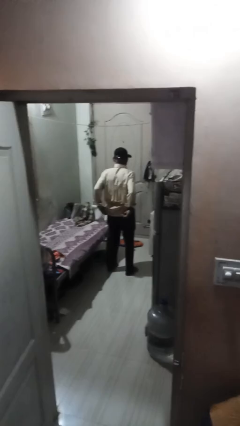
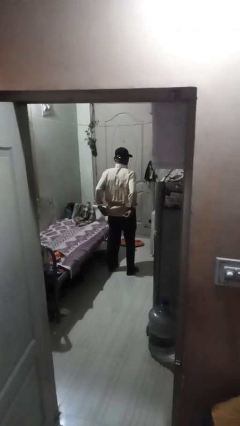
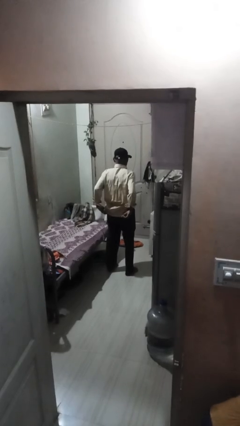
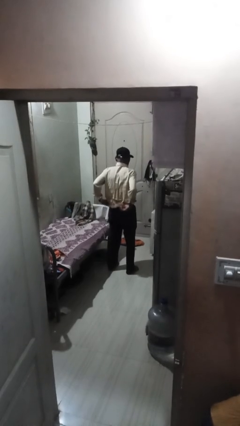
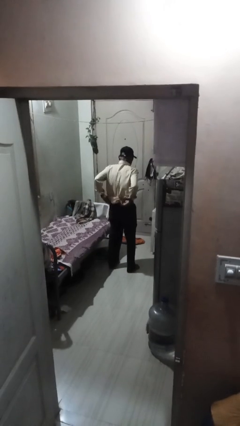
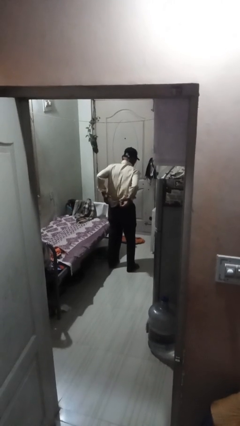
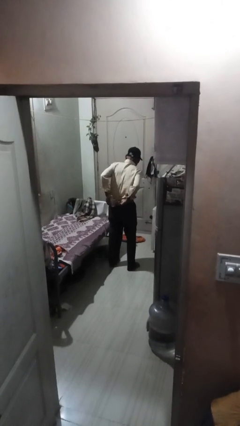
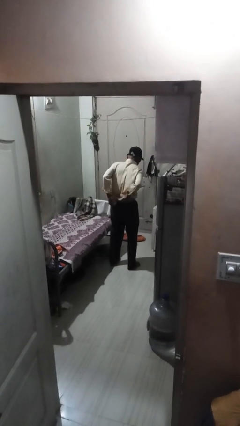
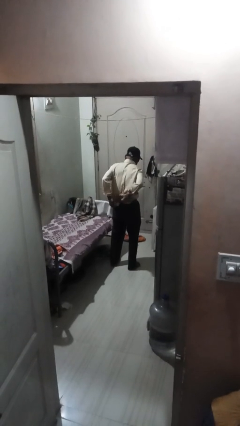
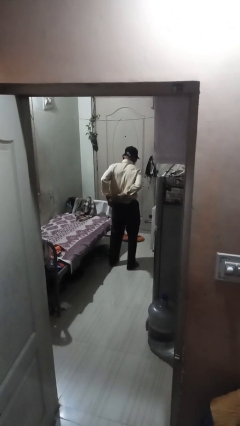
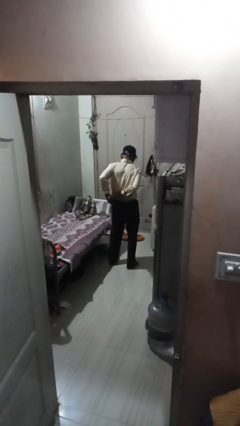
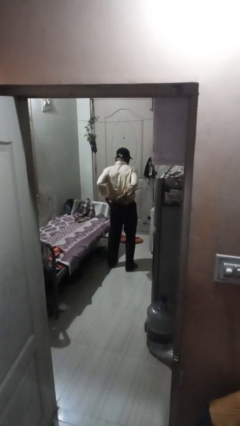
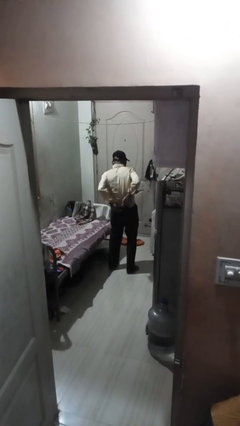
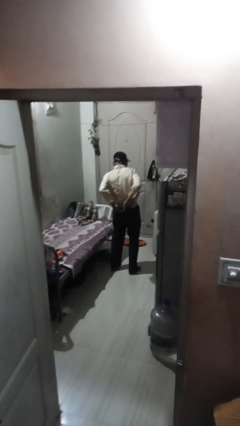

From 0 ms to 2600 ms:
person tucks in shirt

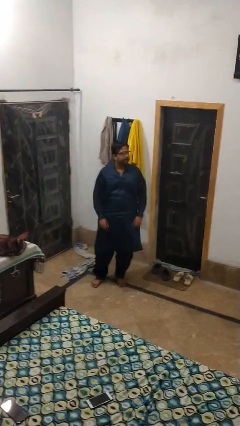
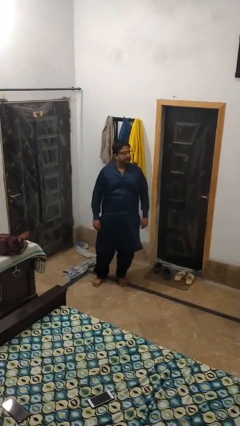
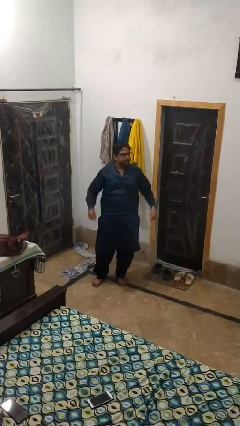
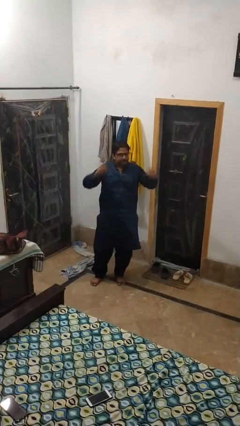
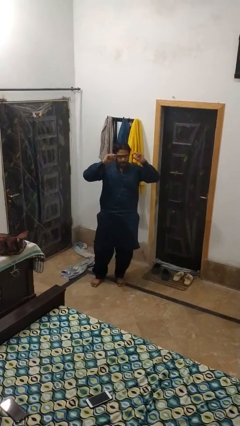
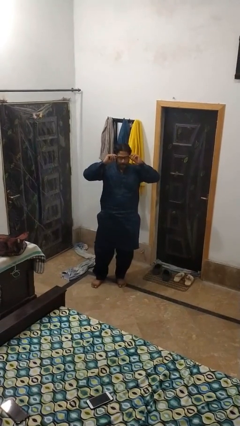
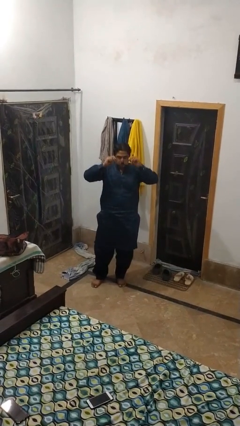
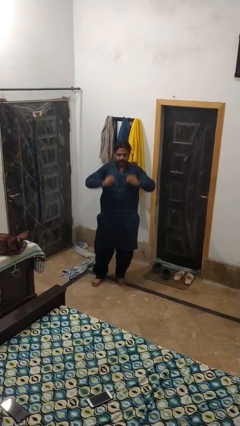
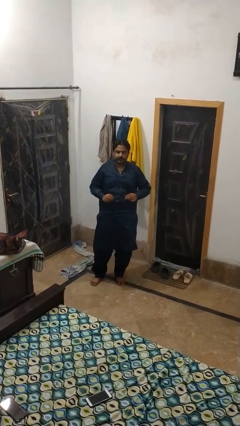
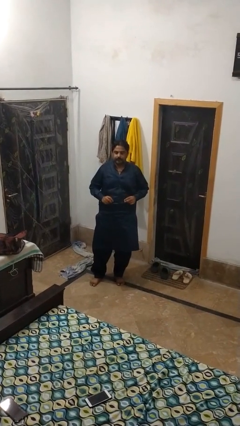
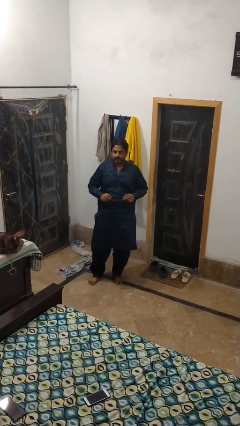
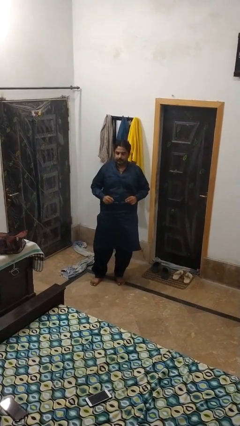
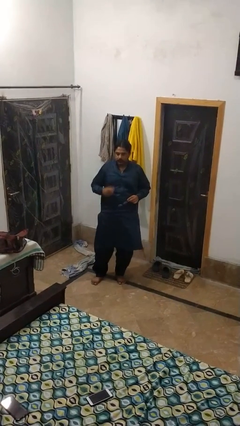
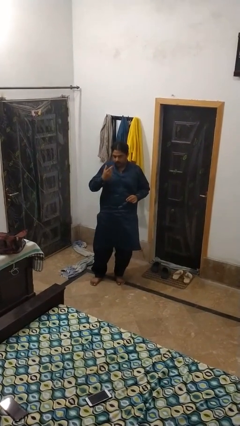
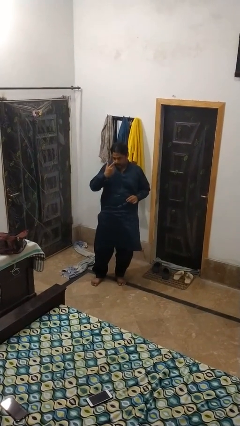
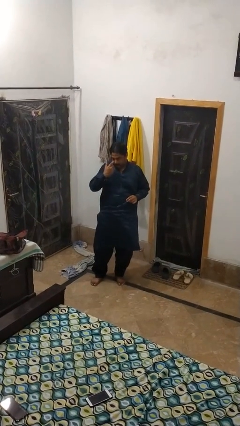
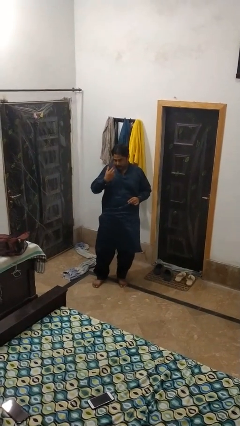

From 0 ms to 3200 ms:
person takes off glasses

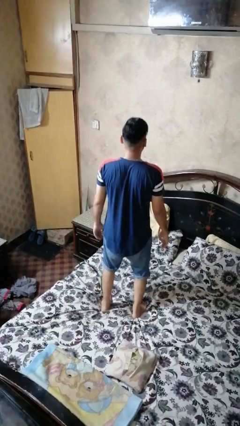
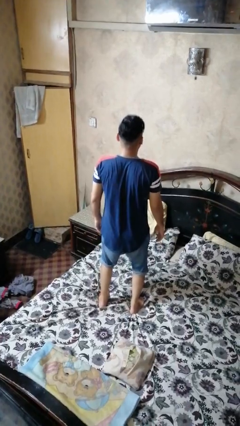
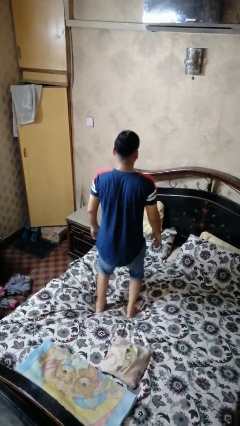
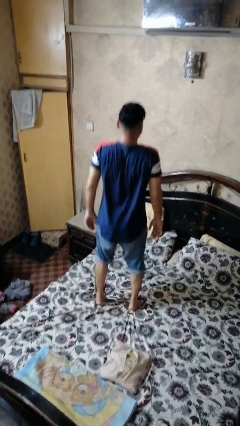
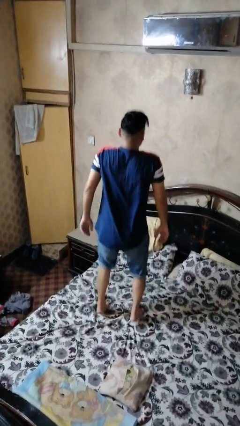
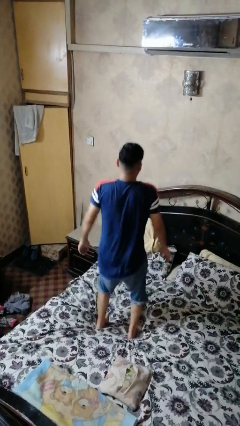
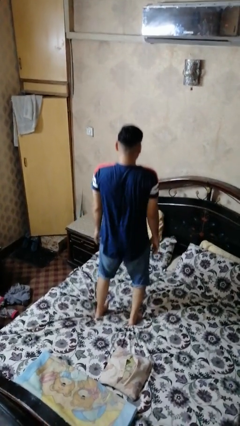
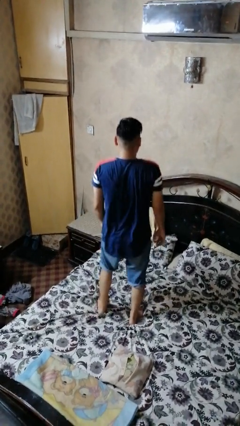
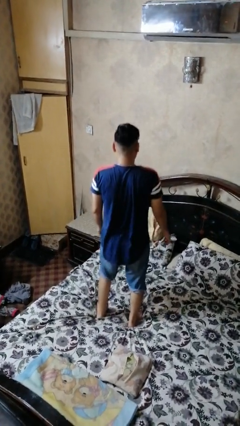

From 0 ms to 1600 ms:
person jumps on bed

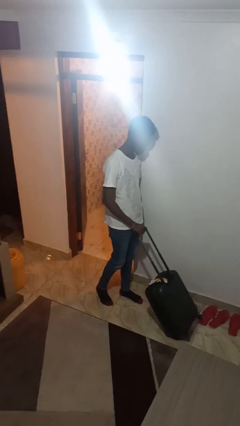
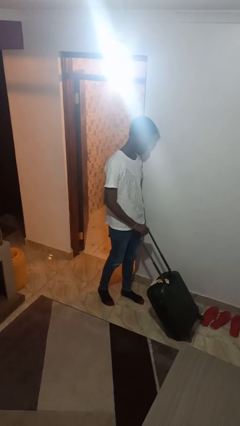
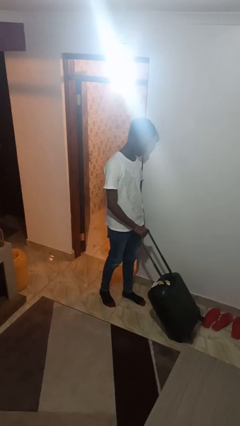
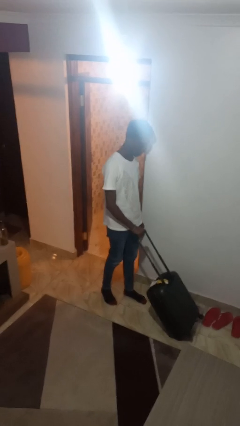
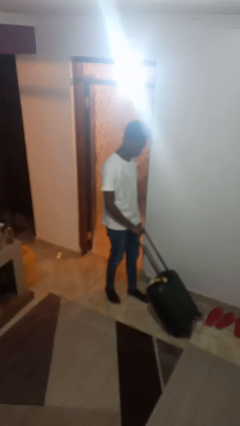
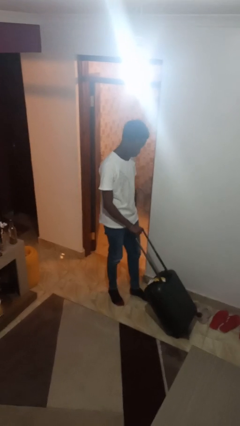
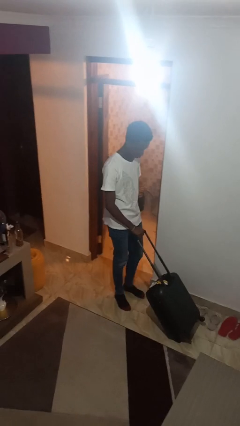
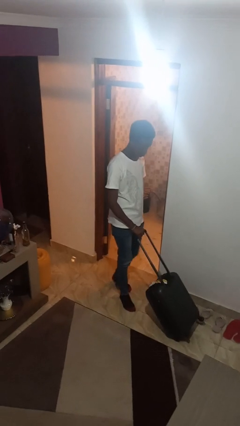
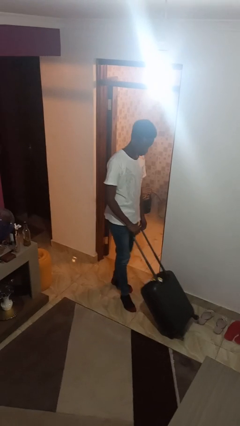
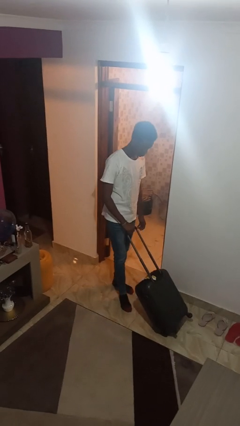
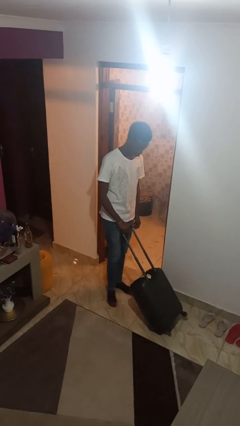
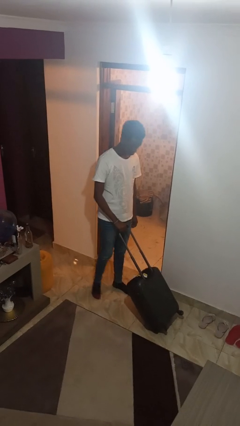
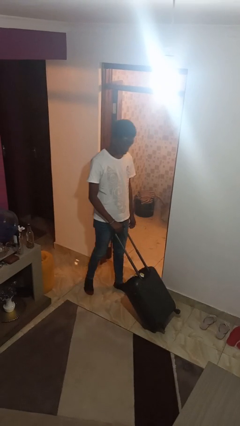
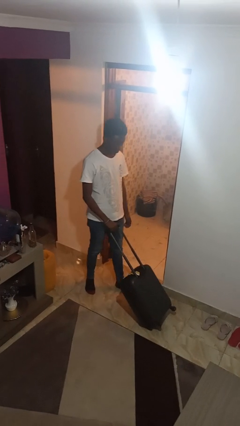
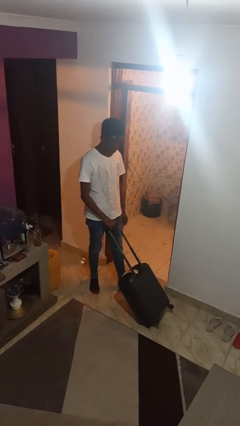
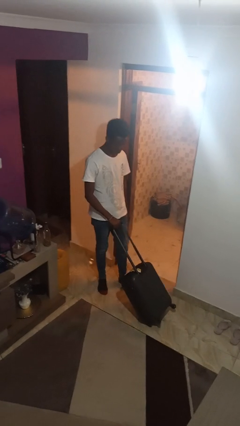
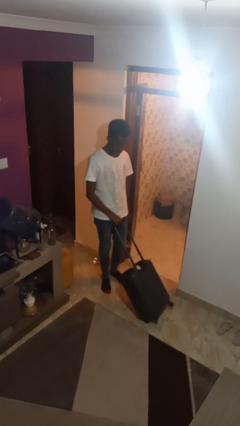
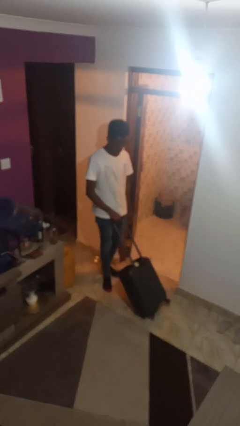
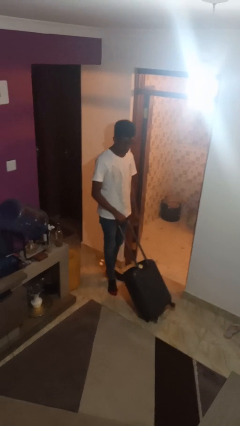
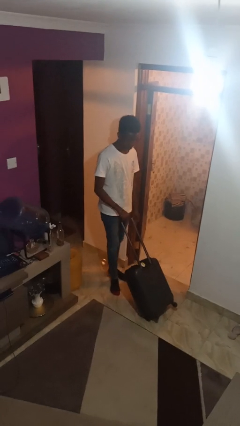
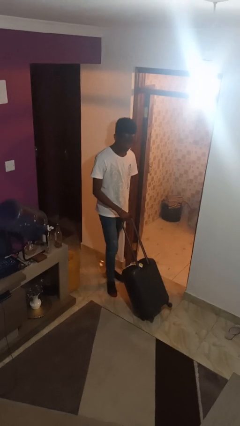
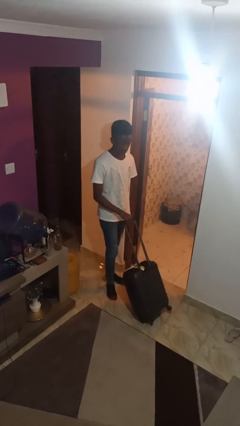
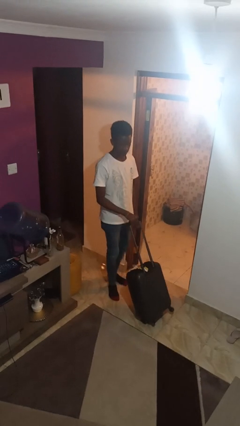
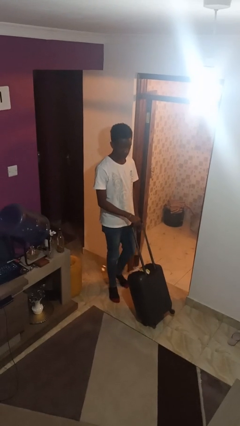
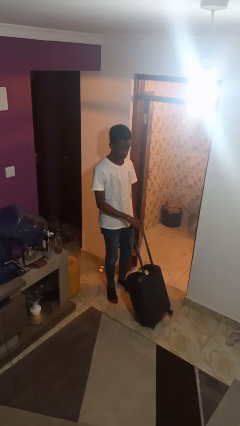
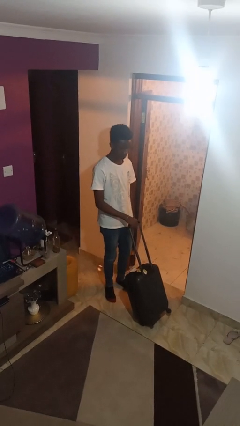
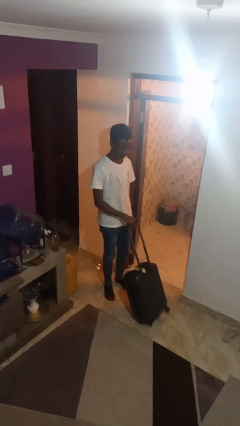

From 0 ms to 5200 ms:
person pulls wheeled cart

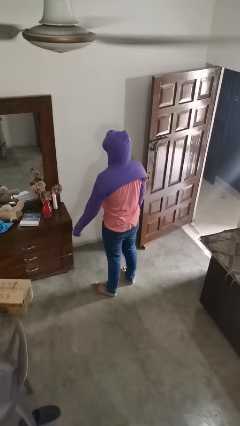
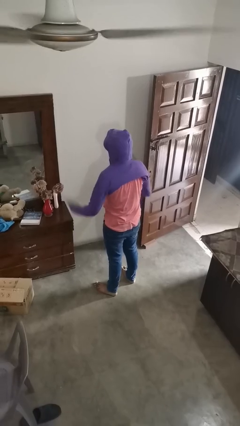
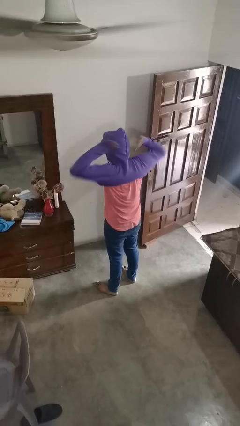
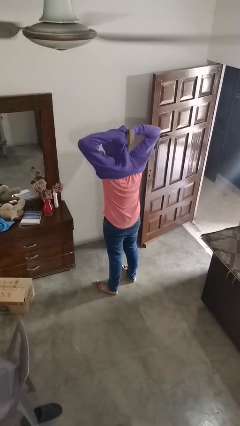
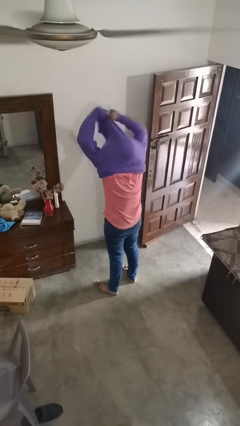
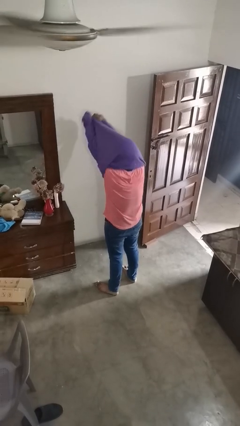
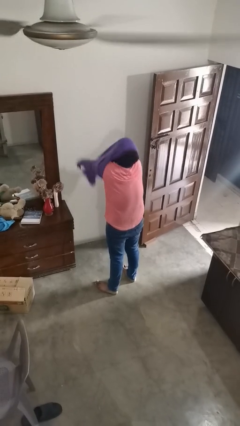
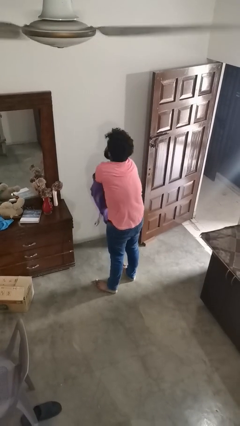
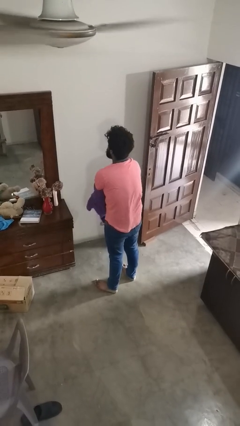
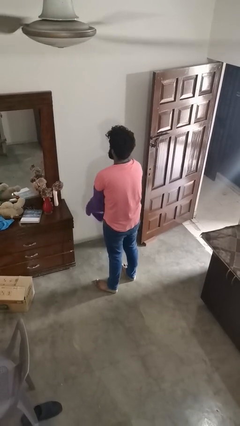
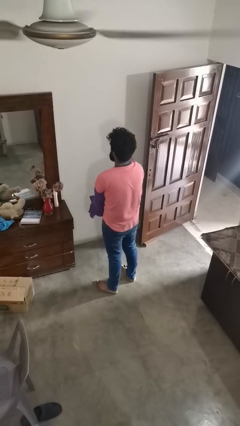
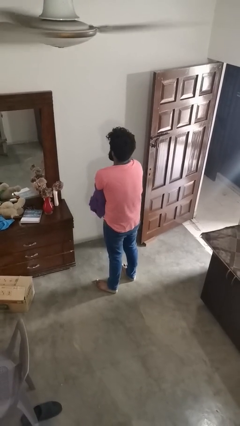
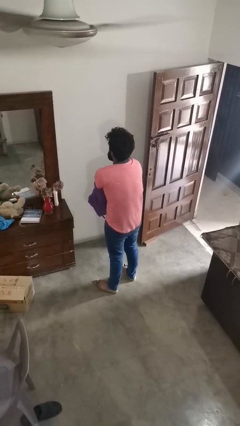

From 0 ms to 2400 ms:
person takes off hoodie

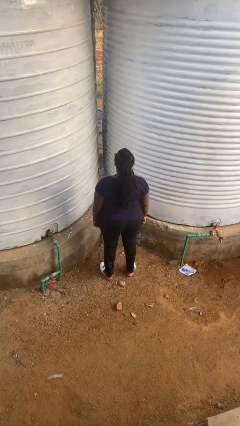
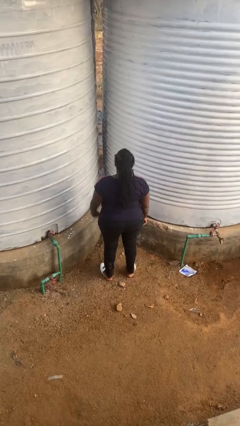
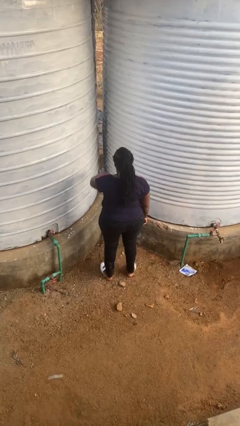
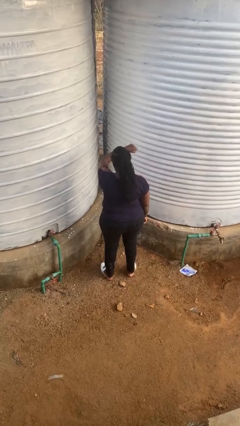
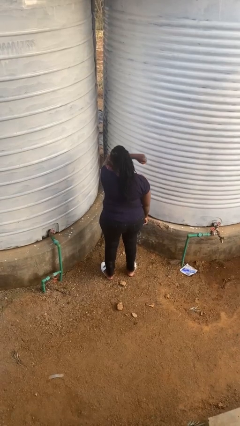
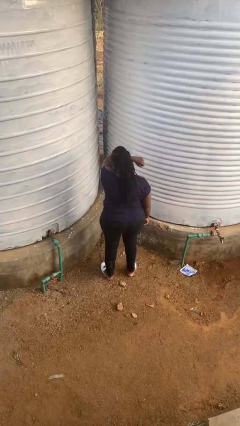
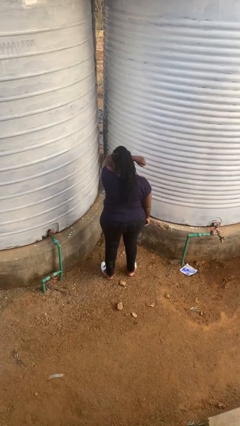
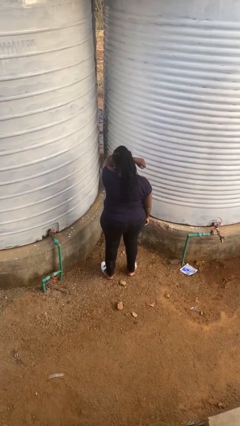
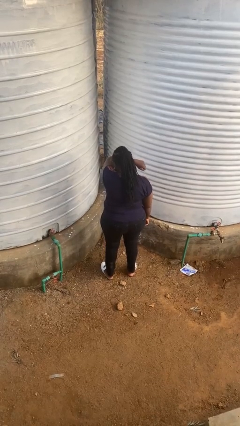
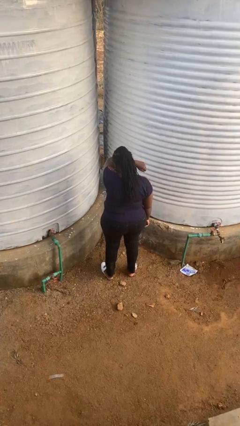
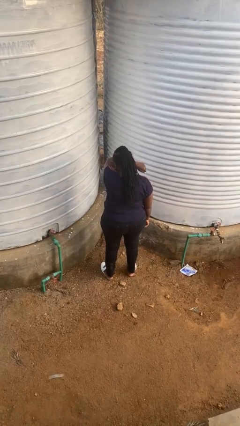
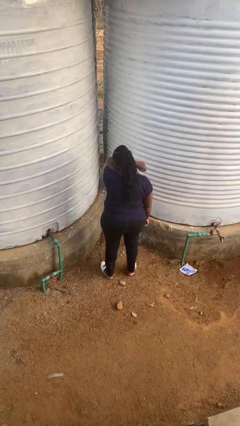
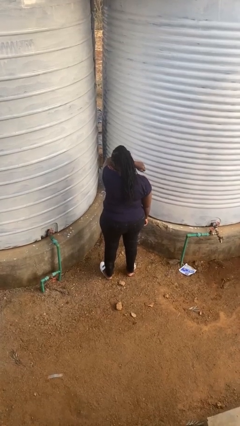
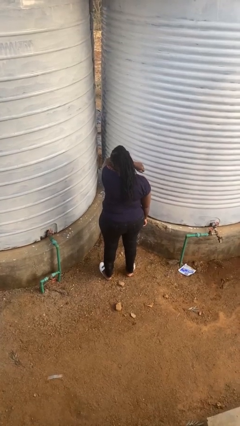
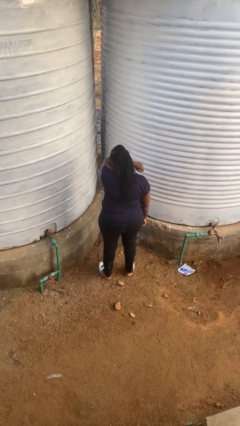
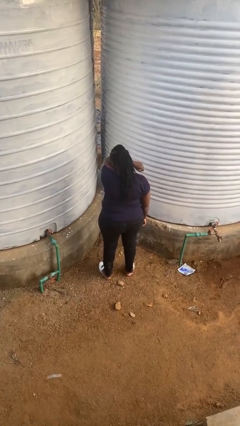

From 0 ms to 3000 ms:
person sneezes into arm
